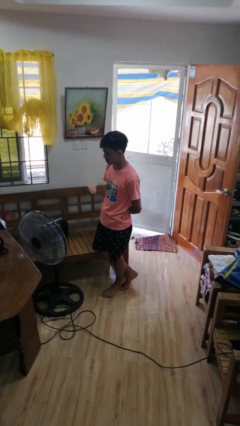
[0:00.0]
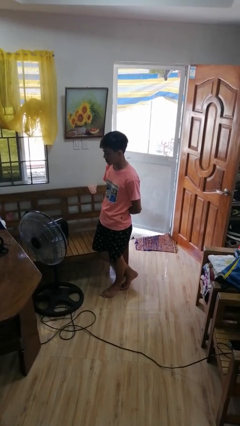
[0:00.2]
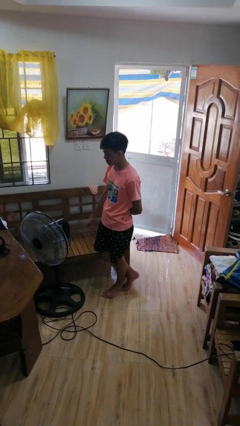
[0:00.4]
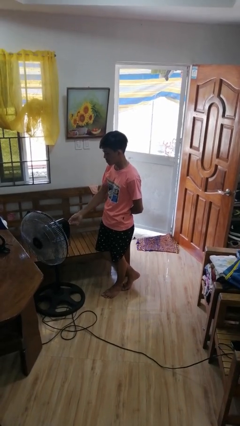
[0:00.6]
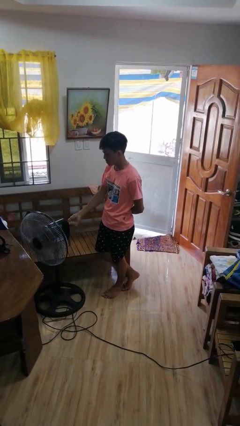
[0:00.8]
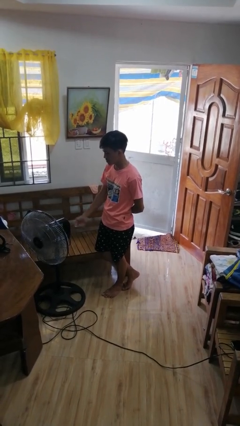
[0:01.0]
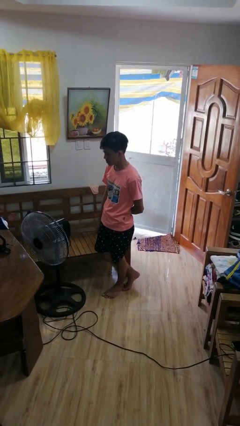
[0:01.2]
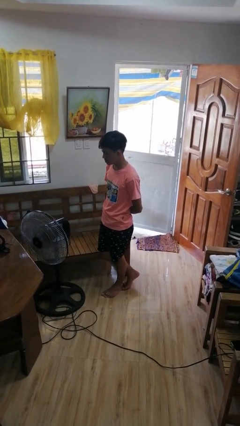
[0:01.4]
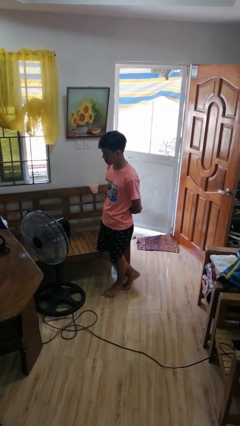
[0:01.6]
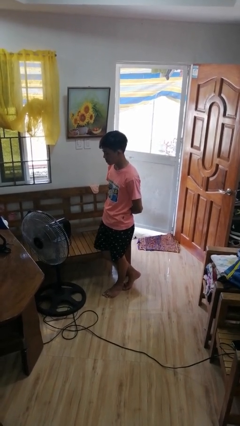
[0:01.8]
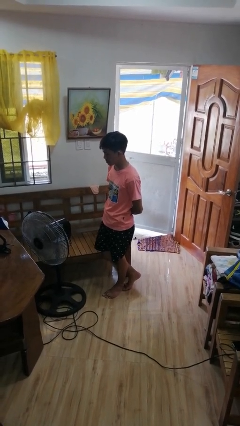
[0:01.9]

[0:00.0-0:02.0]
person turns on fan

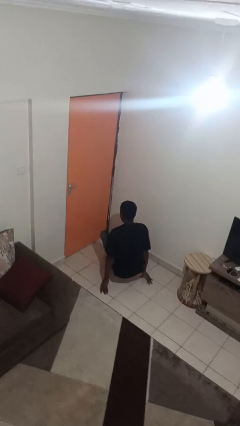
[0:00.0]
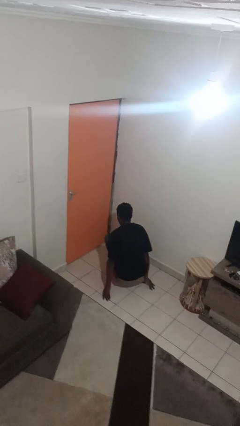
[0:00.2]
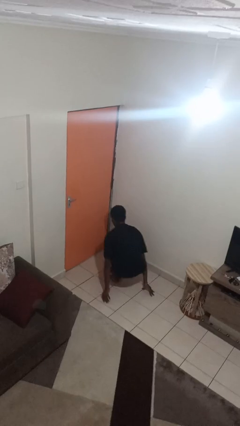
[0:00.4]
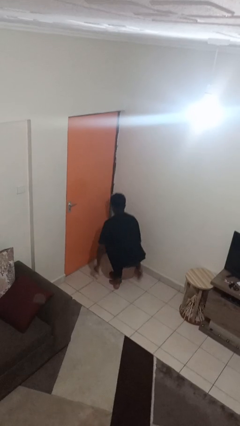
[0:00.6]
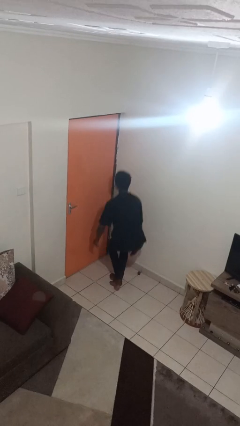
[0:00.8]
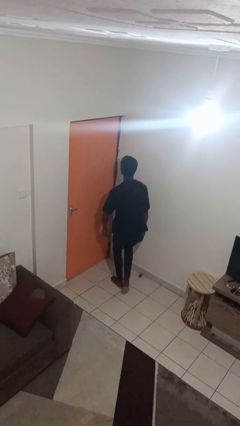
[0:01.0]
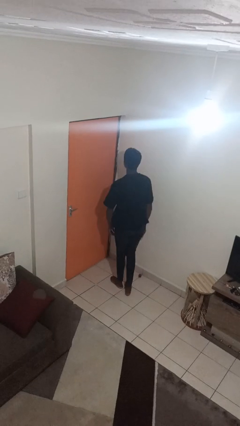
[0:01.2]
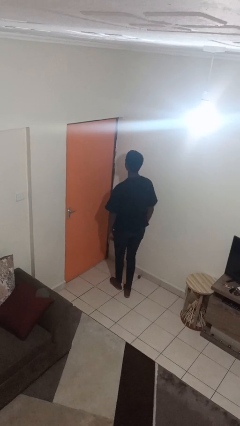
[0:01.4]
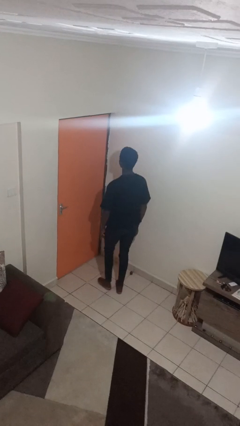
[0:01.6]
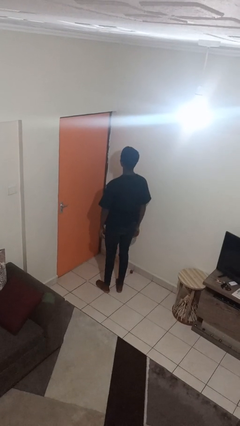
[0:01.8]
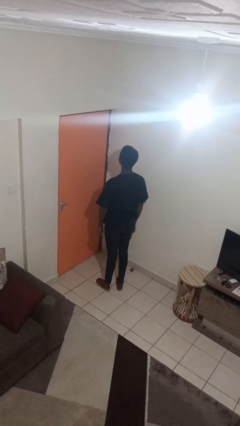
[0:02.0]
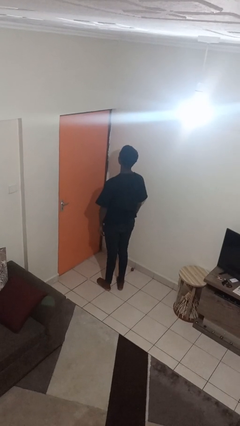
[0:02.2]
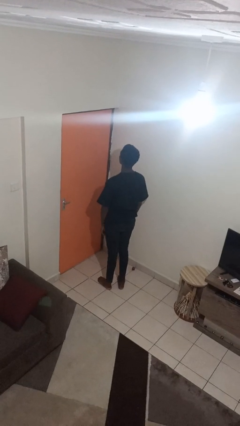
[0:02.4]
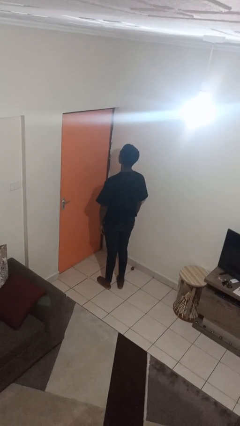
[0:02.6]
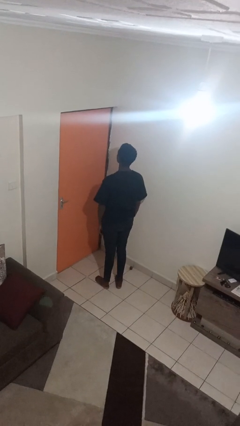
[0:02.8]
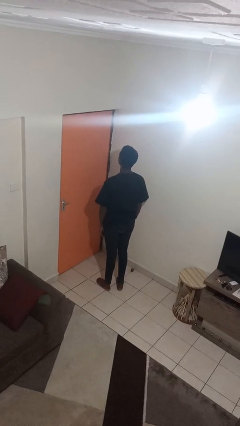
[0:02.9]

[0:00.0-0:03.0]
person stands up from floor

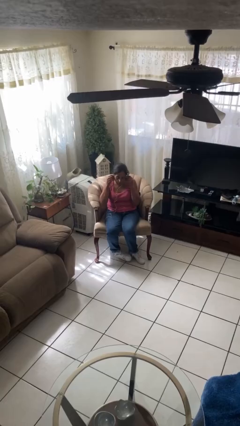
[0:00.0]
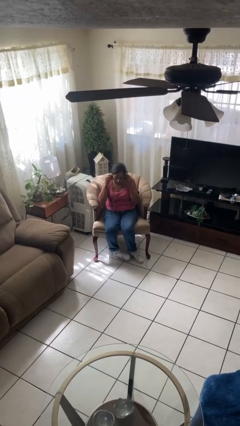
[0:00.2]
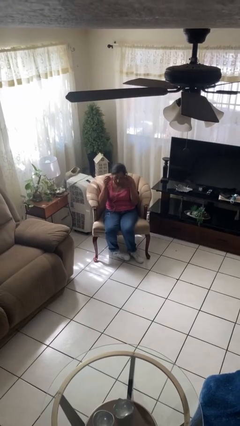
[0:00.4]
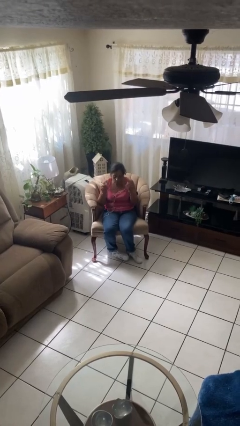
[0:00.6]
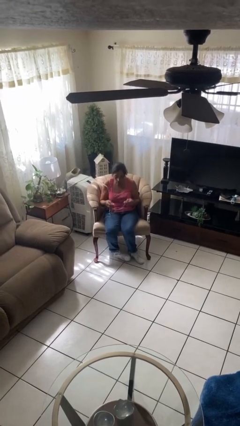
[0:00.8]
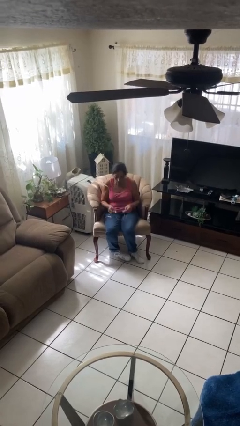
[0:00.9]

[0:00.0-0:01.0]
person takes off headphones

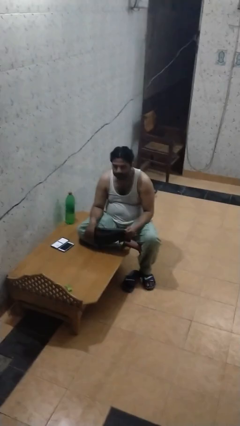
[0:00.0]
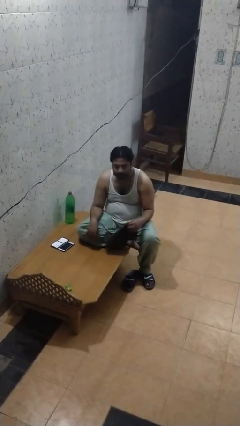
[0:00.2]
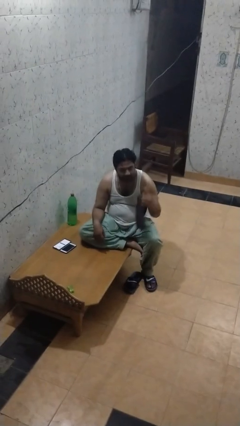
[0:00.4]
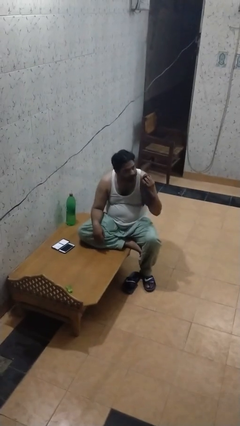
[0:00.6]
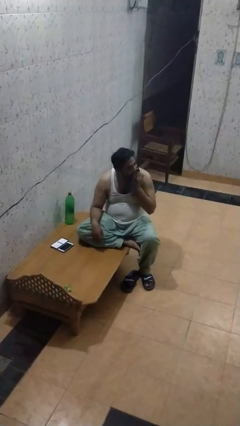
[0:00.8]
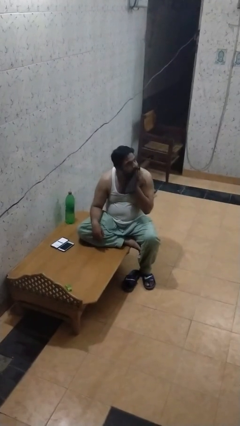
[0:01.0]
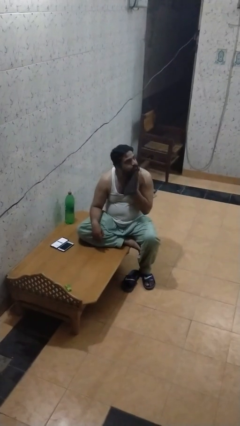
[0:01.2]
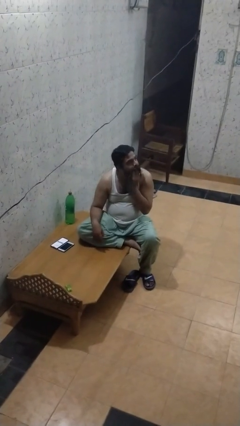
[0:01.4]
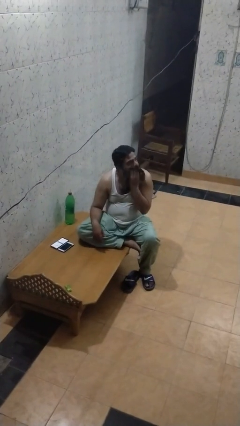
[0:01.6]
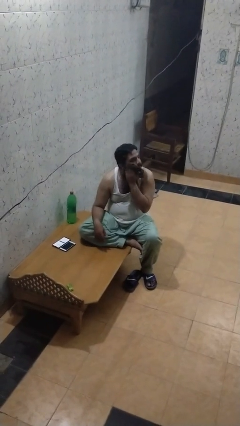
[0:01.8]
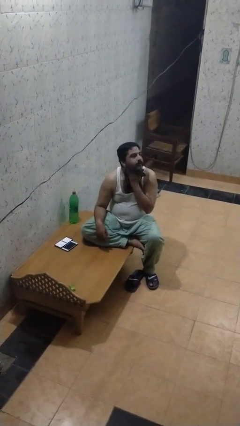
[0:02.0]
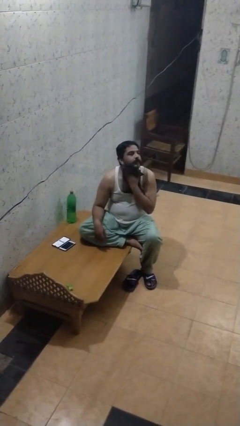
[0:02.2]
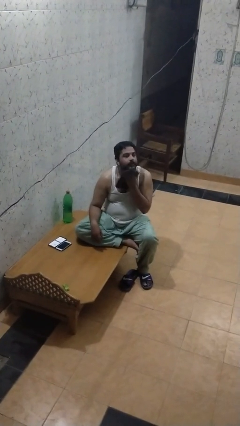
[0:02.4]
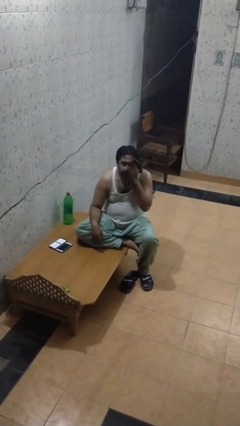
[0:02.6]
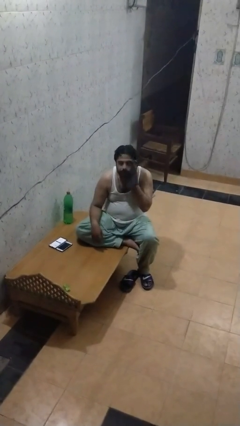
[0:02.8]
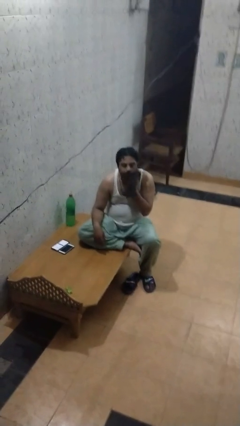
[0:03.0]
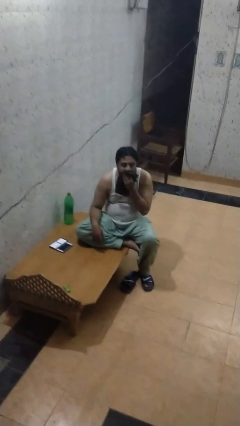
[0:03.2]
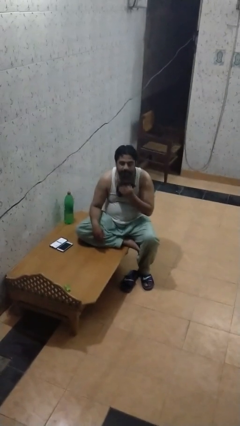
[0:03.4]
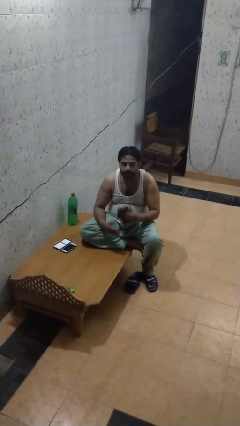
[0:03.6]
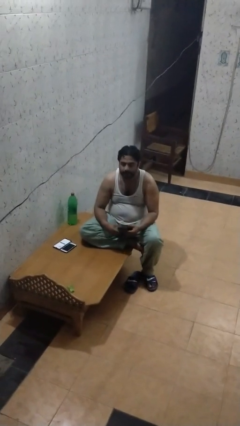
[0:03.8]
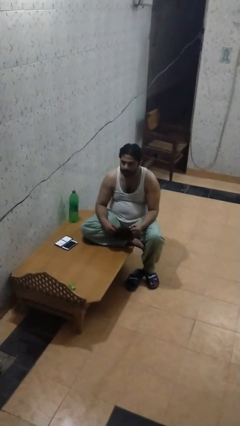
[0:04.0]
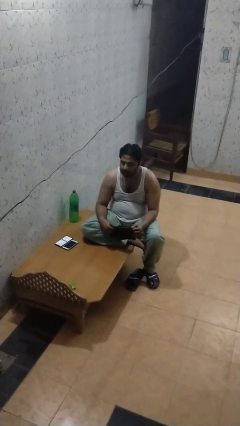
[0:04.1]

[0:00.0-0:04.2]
person wipes mouth with napkin

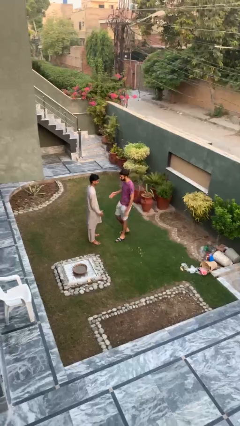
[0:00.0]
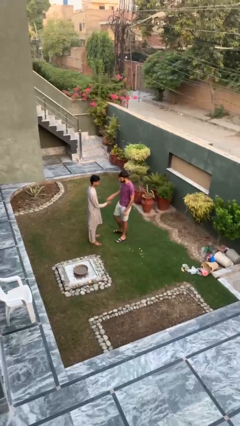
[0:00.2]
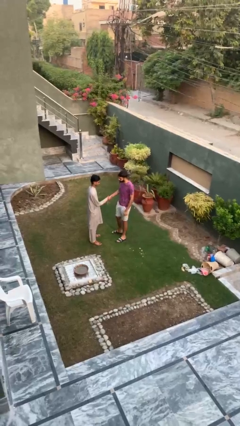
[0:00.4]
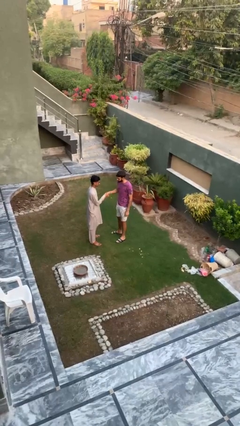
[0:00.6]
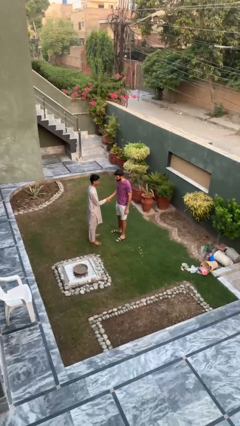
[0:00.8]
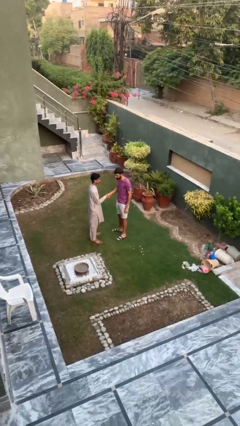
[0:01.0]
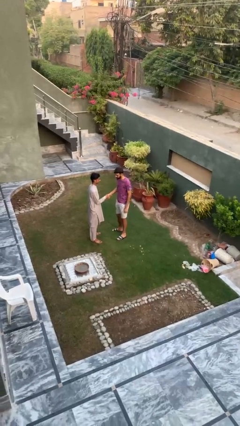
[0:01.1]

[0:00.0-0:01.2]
person shakes hand

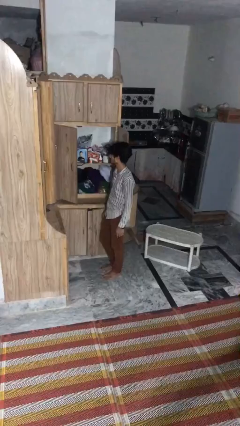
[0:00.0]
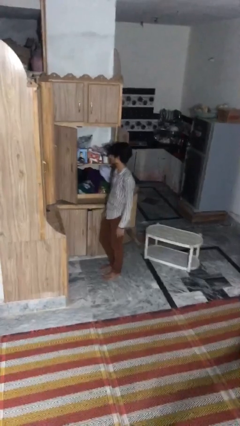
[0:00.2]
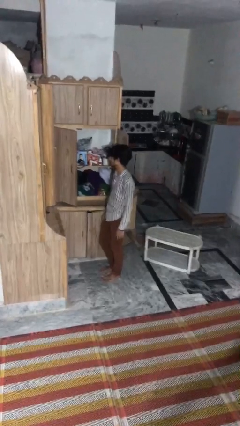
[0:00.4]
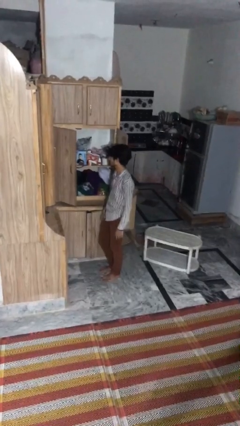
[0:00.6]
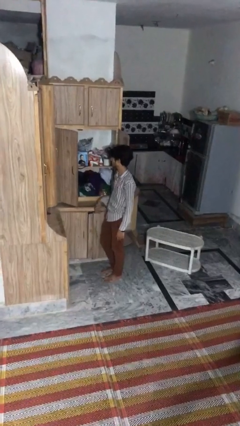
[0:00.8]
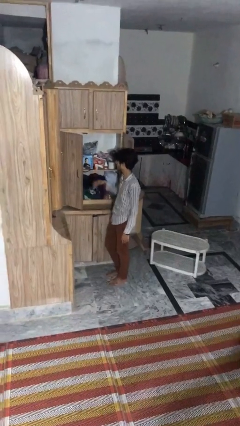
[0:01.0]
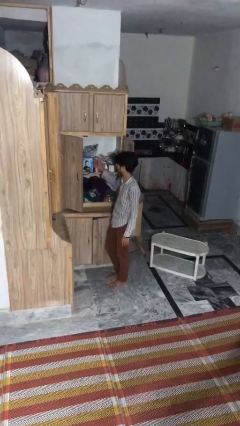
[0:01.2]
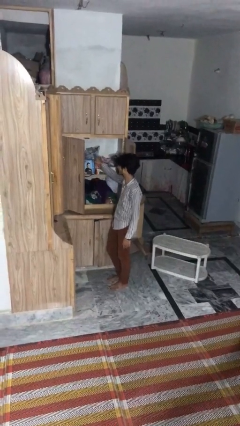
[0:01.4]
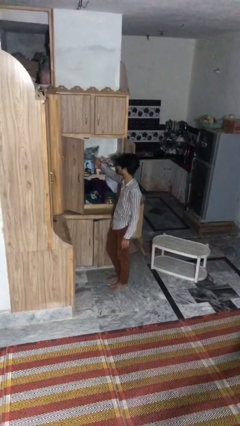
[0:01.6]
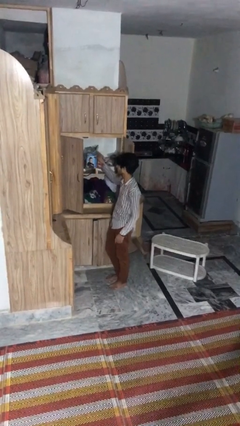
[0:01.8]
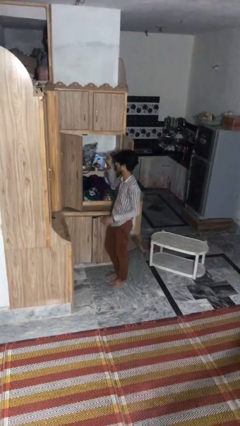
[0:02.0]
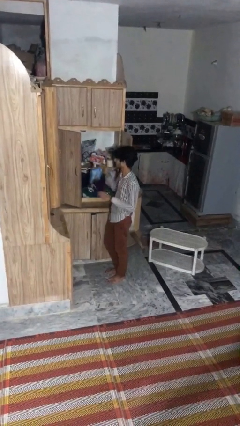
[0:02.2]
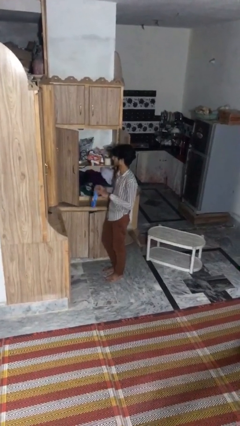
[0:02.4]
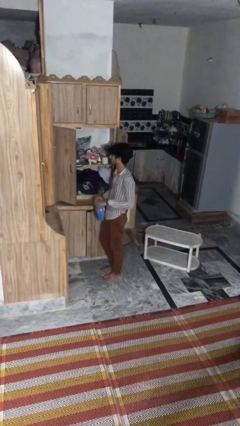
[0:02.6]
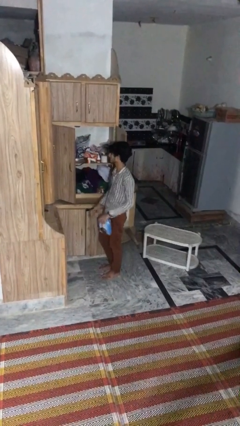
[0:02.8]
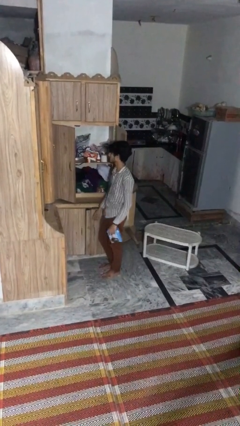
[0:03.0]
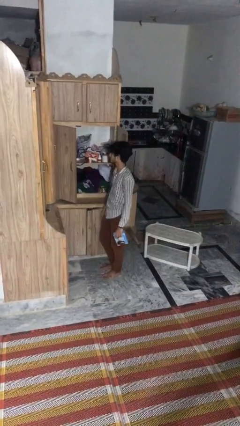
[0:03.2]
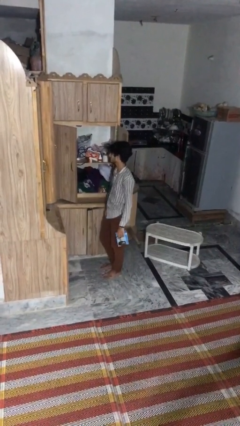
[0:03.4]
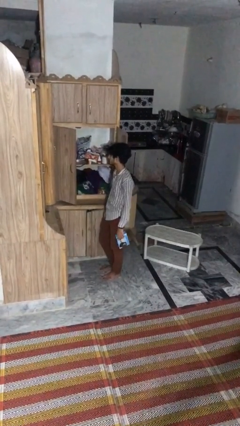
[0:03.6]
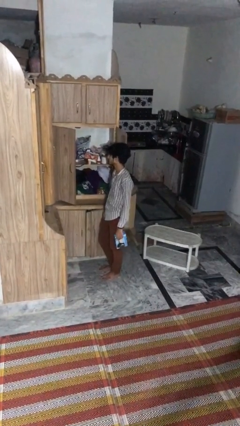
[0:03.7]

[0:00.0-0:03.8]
person picks up object from cabinet

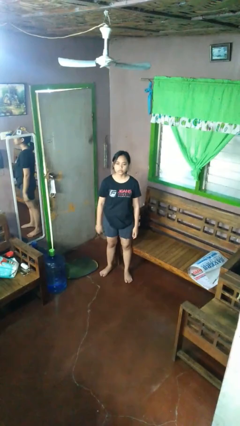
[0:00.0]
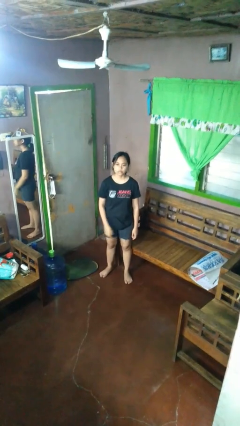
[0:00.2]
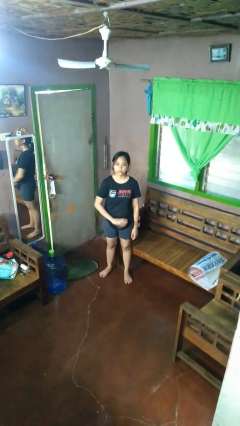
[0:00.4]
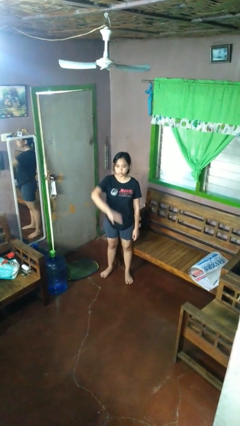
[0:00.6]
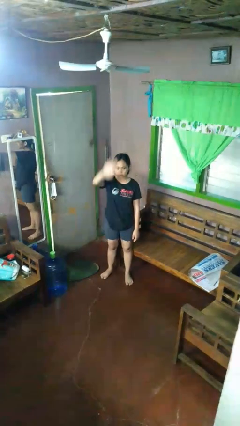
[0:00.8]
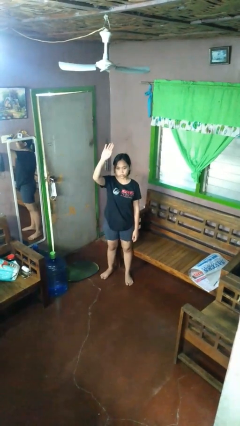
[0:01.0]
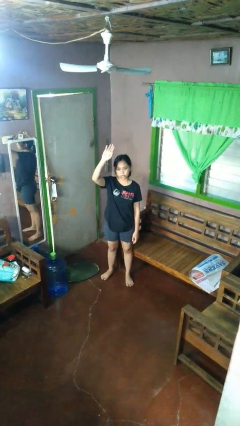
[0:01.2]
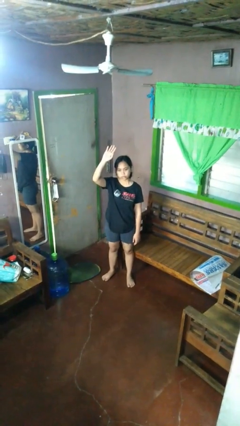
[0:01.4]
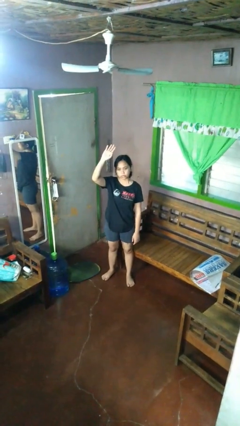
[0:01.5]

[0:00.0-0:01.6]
person gestures swipe up

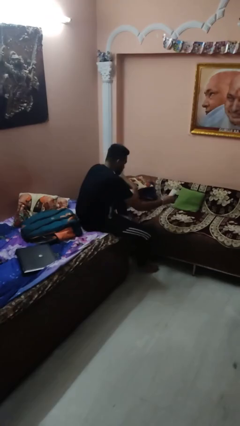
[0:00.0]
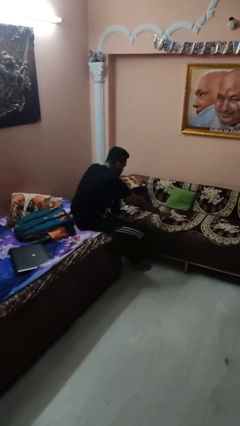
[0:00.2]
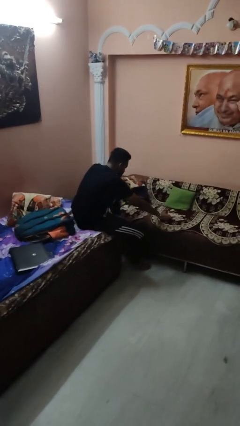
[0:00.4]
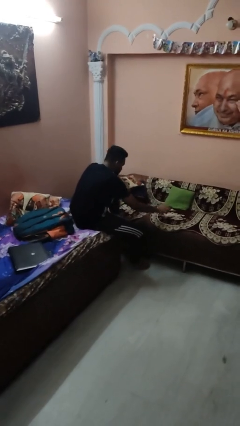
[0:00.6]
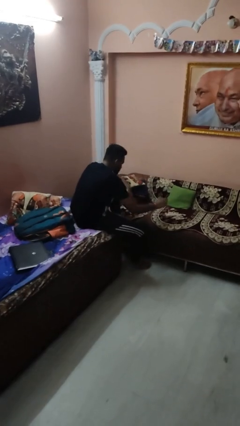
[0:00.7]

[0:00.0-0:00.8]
person puts down object on couch
